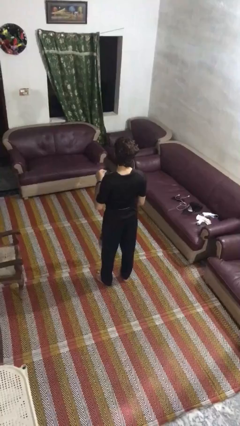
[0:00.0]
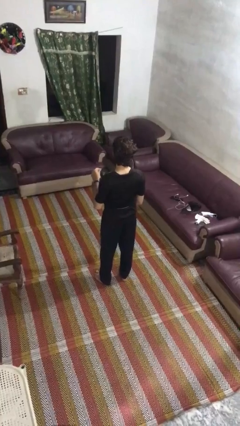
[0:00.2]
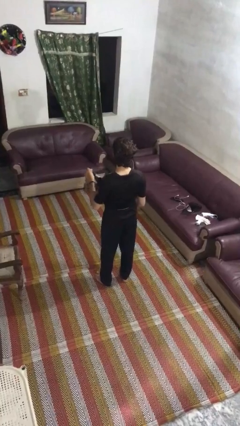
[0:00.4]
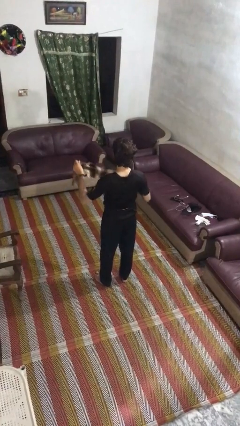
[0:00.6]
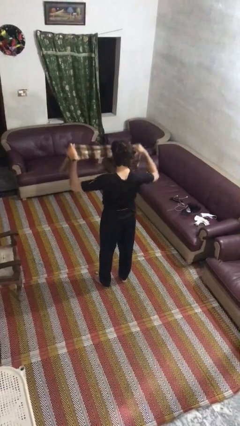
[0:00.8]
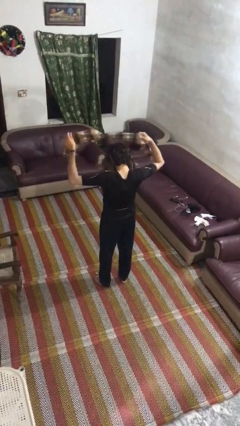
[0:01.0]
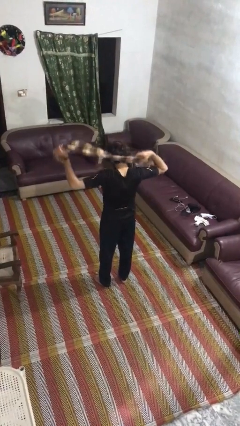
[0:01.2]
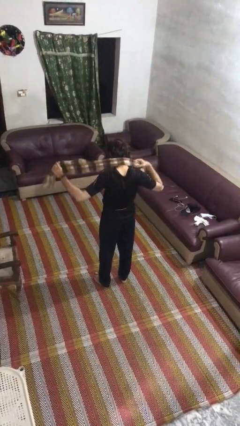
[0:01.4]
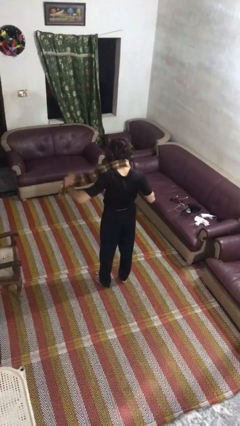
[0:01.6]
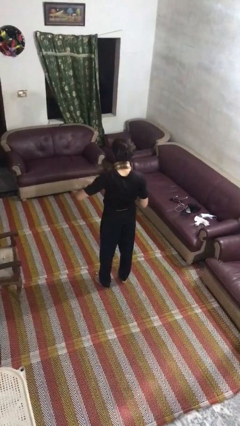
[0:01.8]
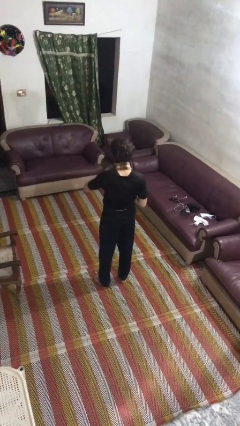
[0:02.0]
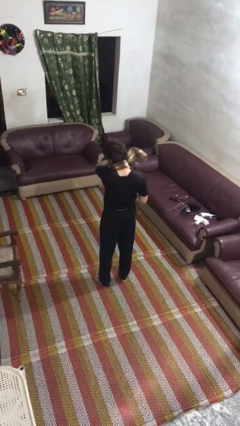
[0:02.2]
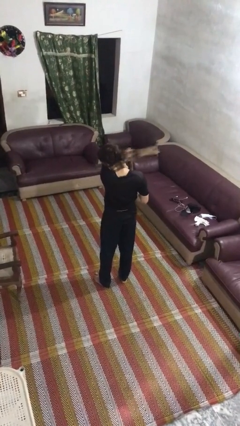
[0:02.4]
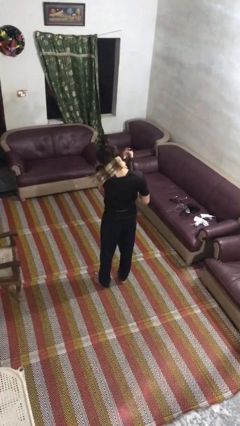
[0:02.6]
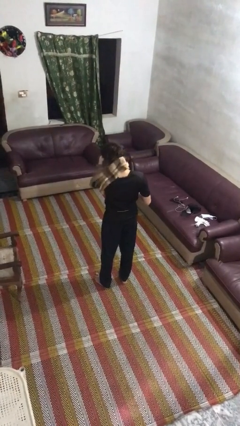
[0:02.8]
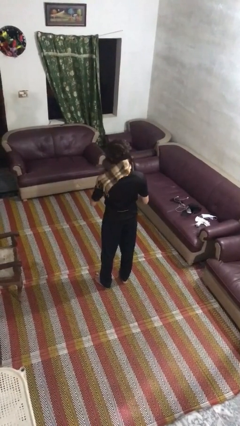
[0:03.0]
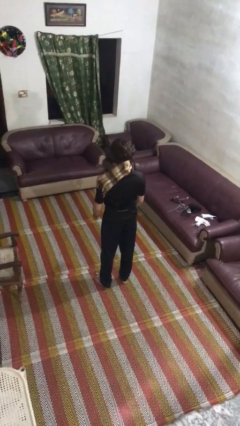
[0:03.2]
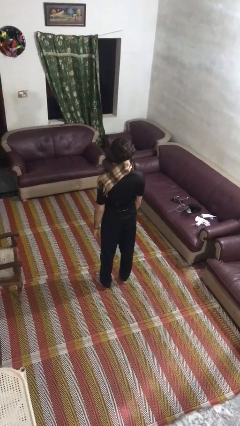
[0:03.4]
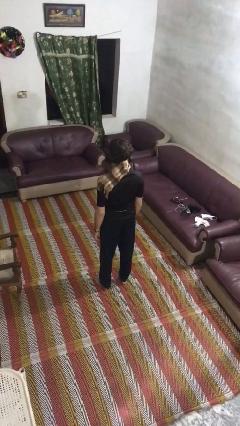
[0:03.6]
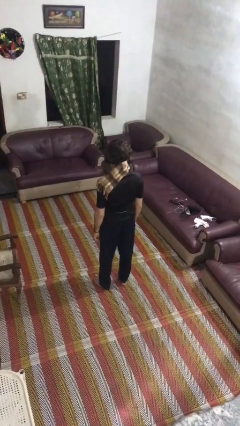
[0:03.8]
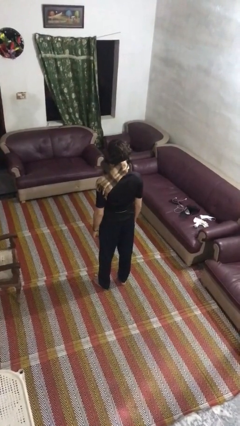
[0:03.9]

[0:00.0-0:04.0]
person puts on scarf

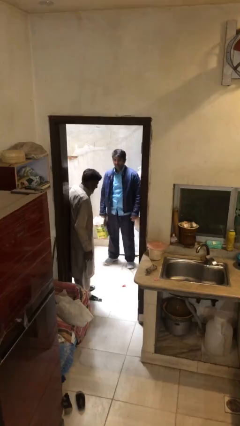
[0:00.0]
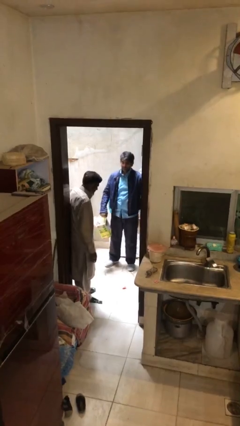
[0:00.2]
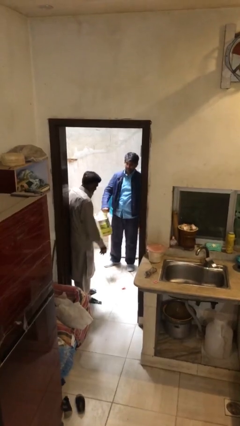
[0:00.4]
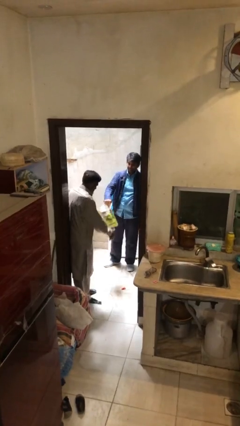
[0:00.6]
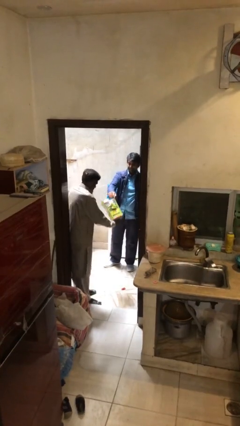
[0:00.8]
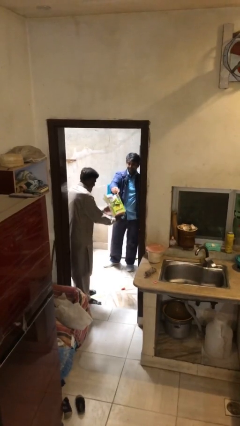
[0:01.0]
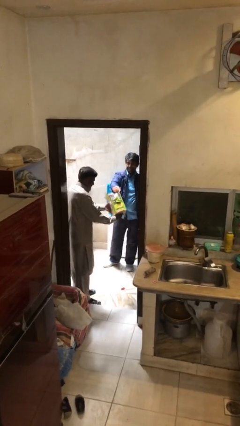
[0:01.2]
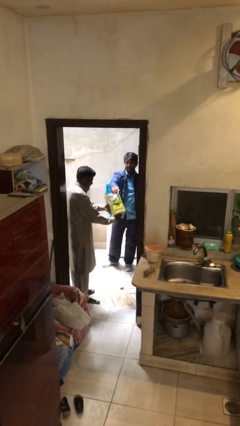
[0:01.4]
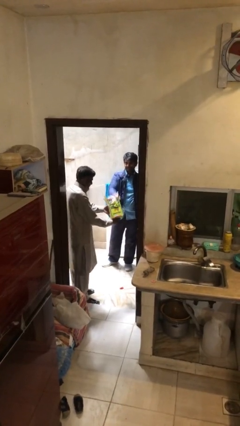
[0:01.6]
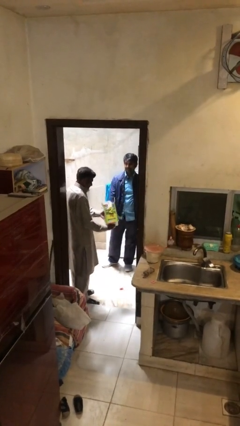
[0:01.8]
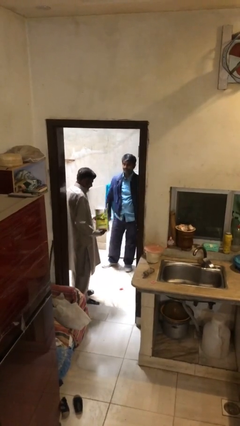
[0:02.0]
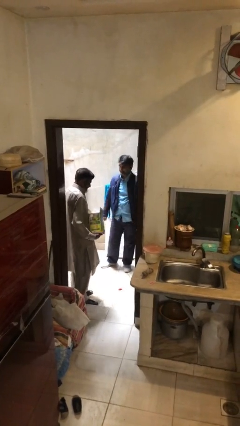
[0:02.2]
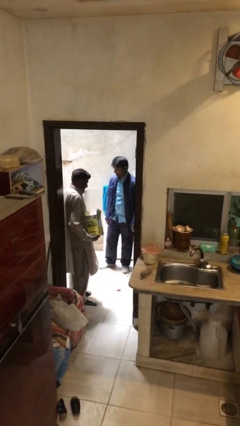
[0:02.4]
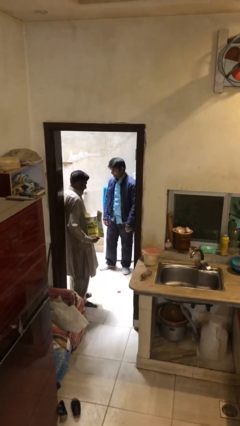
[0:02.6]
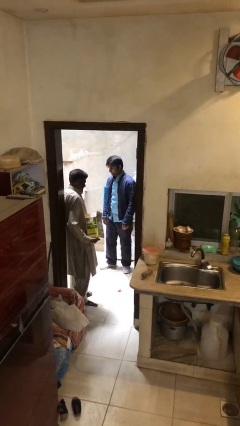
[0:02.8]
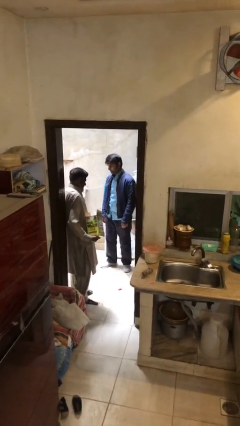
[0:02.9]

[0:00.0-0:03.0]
person transfers object to person

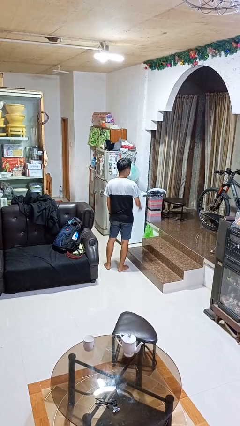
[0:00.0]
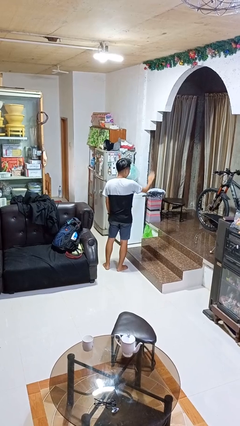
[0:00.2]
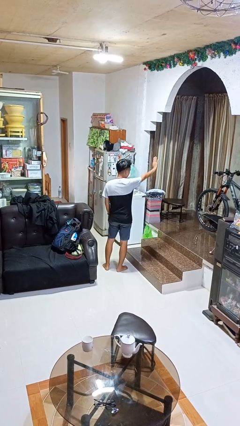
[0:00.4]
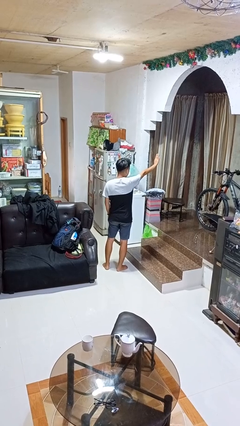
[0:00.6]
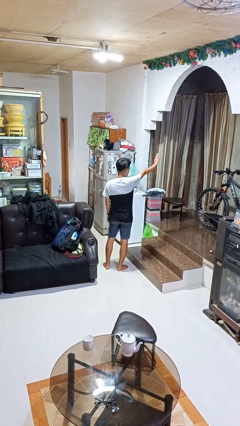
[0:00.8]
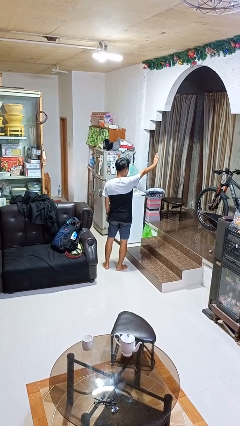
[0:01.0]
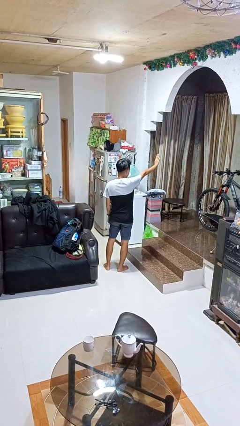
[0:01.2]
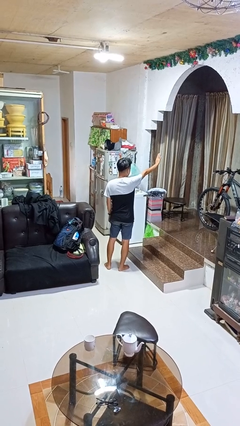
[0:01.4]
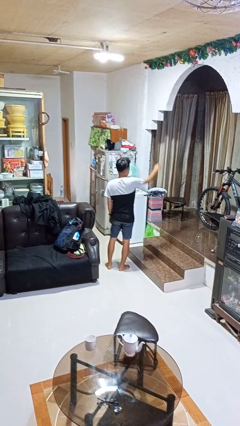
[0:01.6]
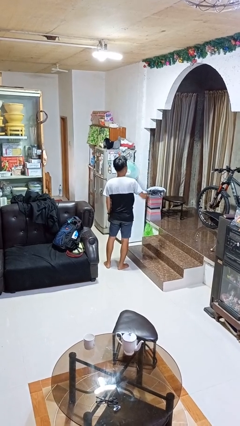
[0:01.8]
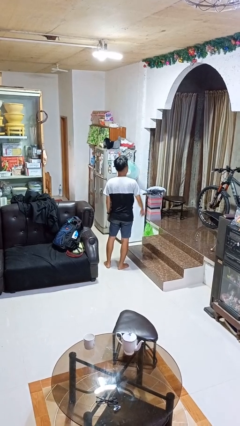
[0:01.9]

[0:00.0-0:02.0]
person gestures stop

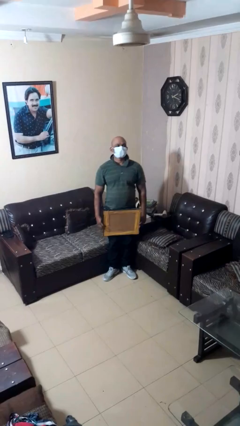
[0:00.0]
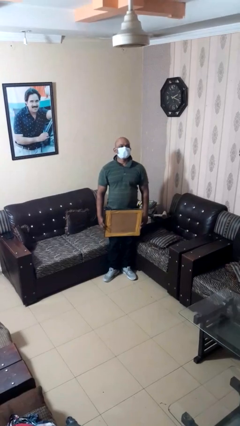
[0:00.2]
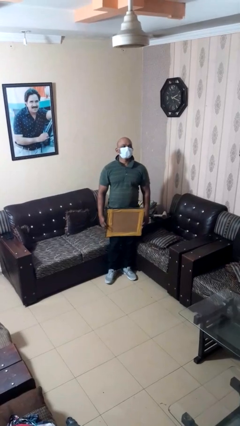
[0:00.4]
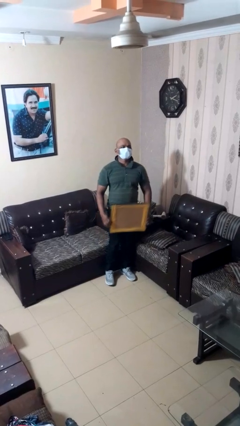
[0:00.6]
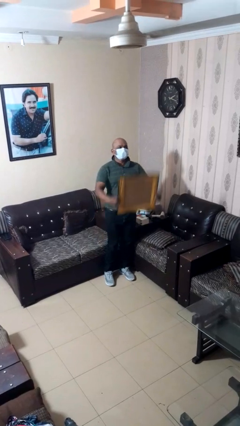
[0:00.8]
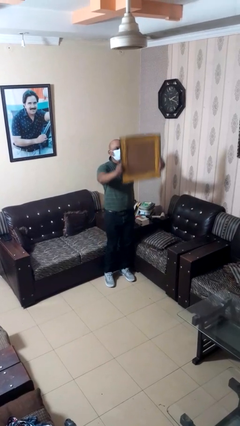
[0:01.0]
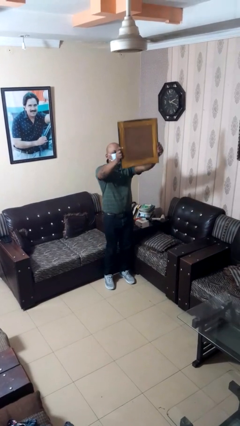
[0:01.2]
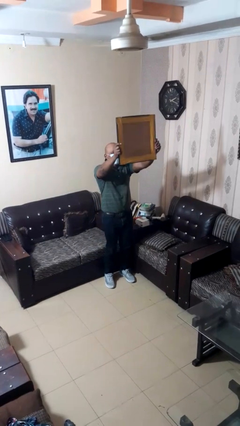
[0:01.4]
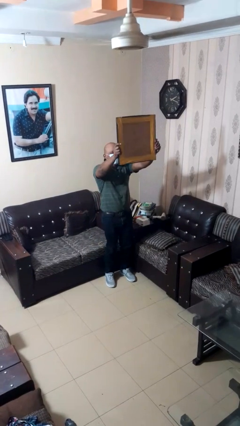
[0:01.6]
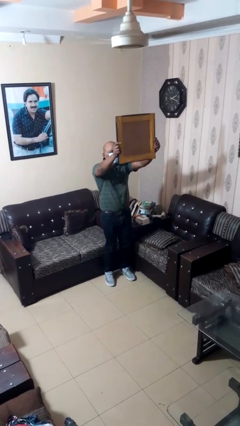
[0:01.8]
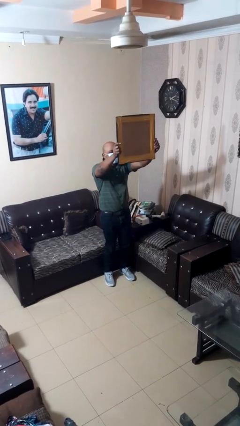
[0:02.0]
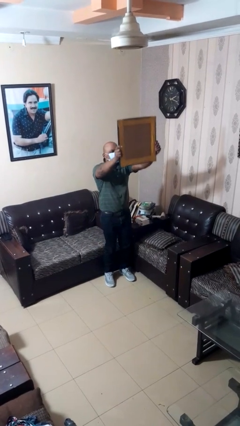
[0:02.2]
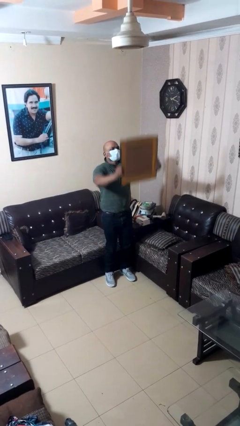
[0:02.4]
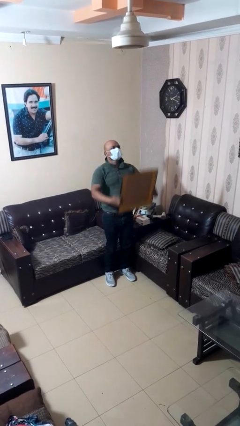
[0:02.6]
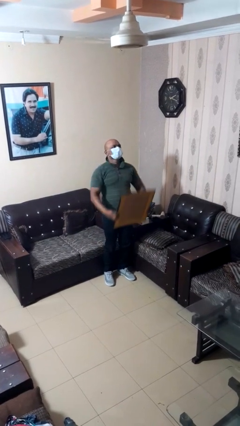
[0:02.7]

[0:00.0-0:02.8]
person holds object above head

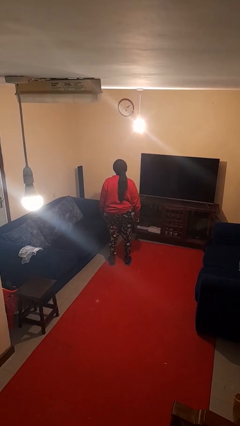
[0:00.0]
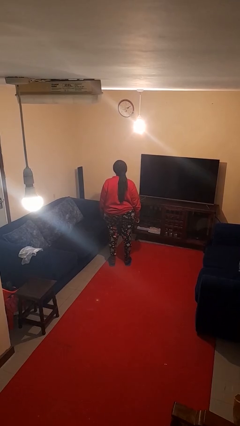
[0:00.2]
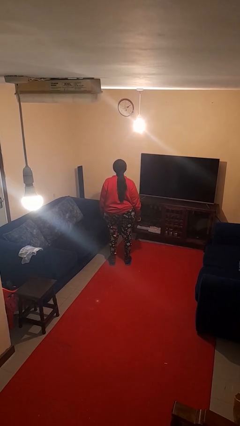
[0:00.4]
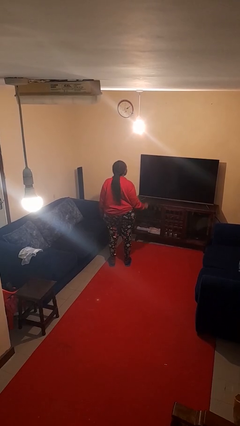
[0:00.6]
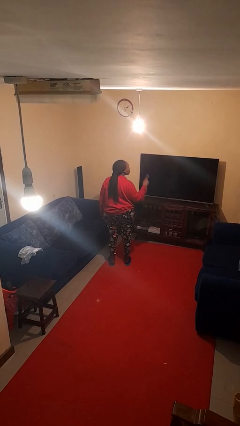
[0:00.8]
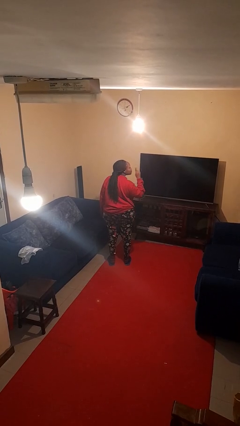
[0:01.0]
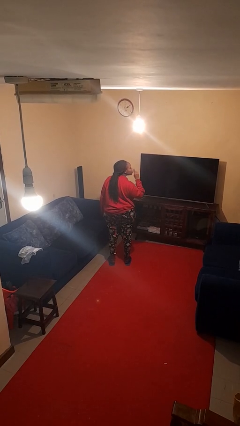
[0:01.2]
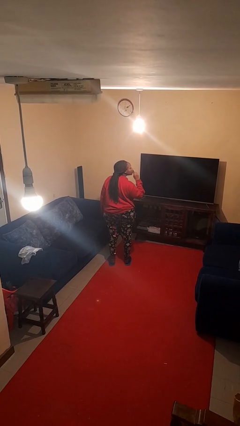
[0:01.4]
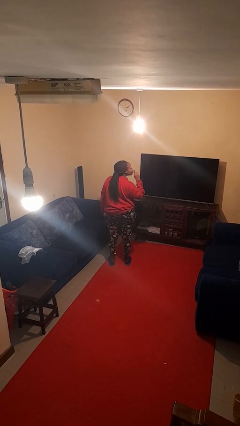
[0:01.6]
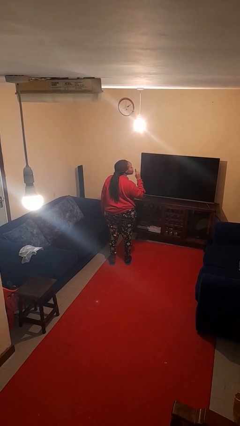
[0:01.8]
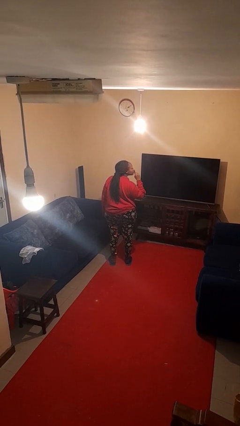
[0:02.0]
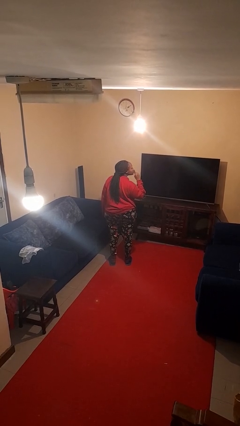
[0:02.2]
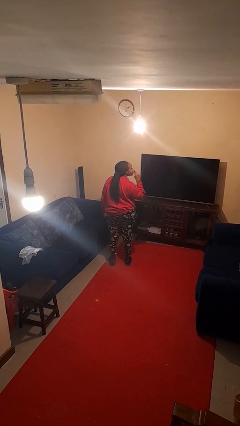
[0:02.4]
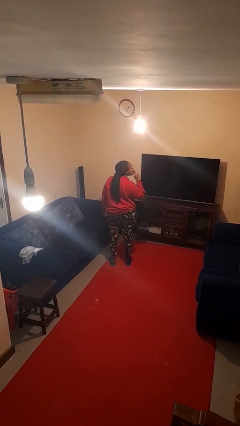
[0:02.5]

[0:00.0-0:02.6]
person gestures be quiet

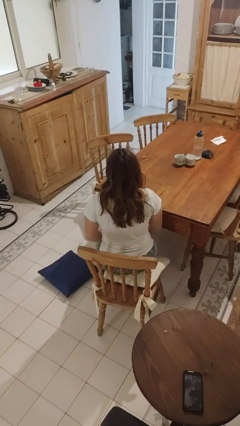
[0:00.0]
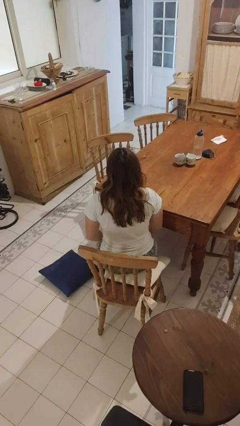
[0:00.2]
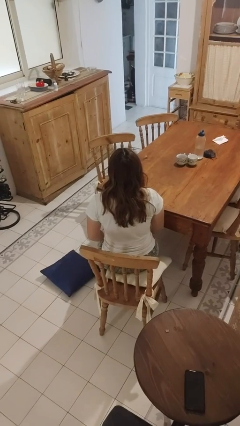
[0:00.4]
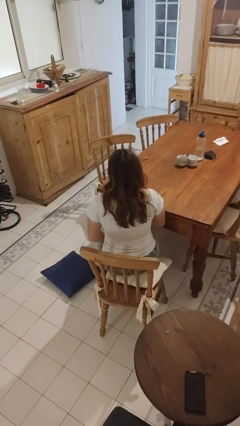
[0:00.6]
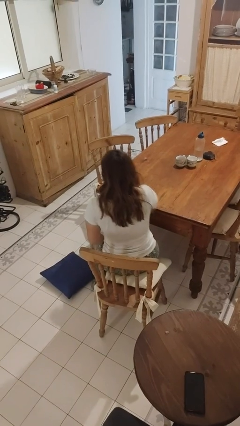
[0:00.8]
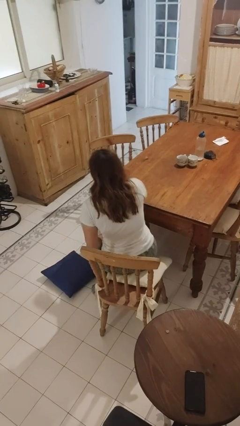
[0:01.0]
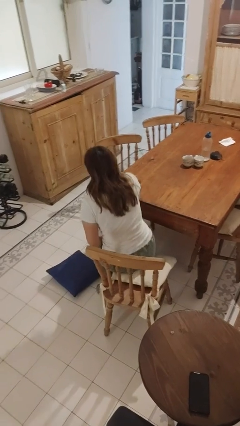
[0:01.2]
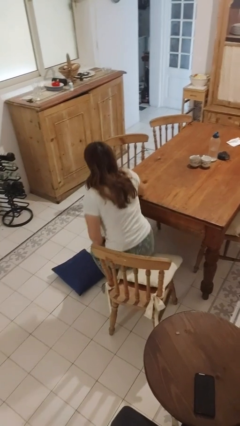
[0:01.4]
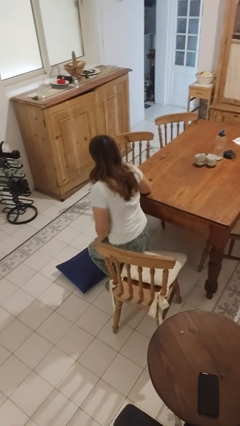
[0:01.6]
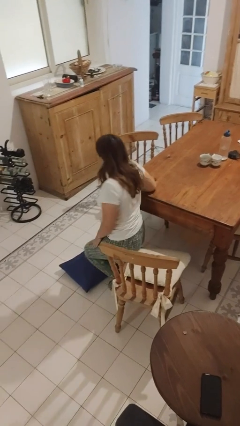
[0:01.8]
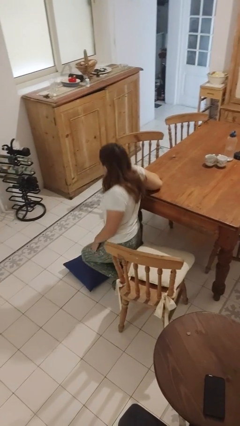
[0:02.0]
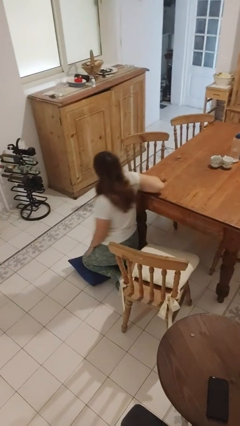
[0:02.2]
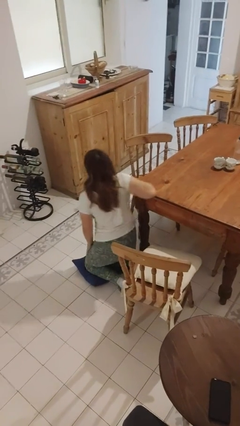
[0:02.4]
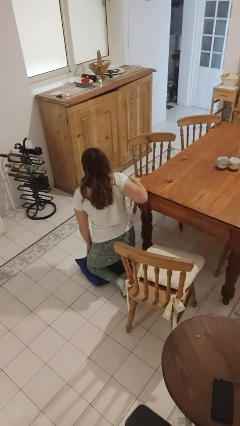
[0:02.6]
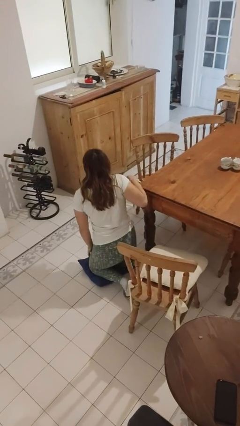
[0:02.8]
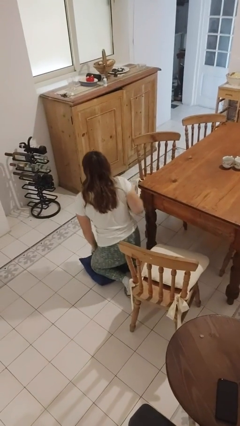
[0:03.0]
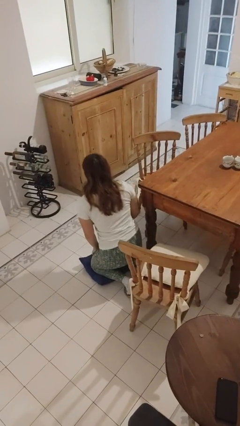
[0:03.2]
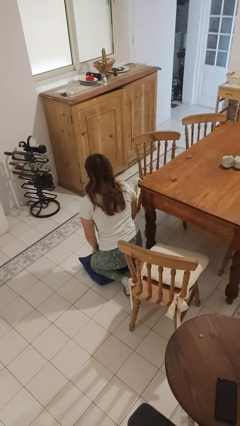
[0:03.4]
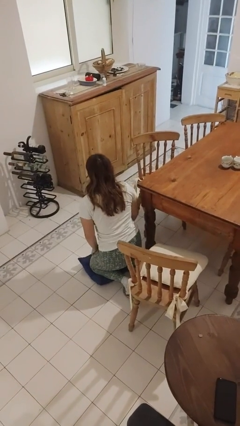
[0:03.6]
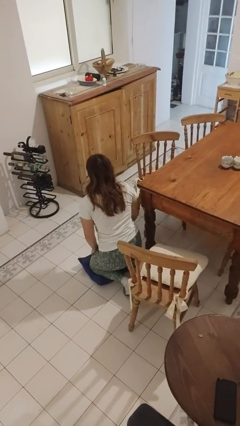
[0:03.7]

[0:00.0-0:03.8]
person stands up from floor
